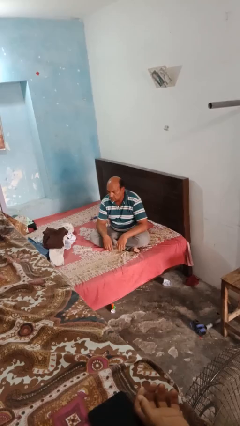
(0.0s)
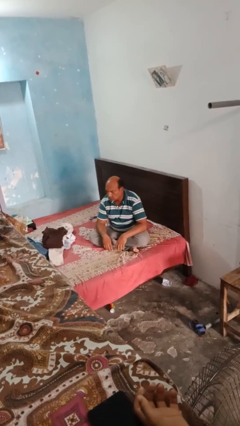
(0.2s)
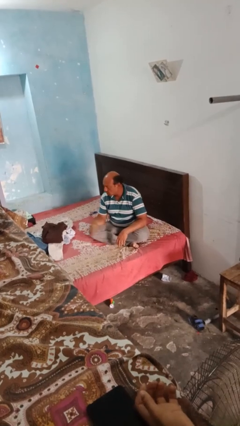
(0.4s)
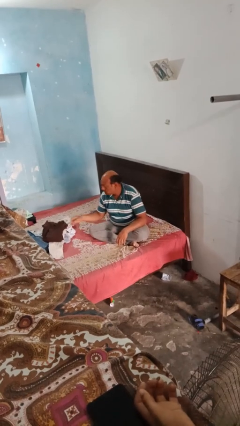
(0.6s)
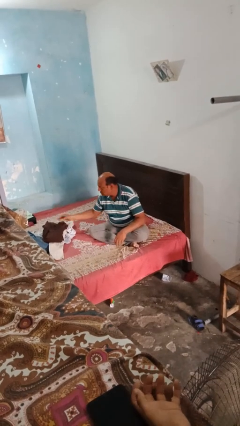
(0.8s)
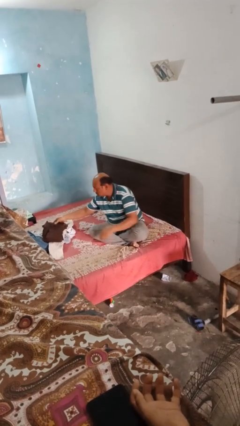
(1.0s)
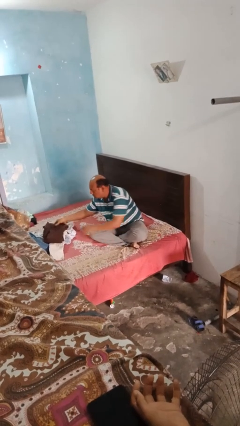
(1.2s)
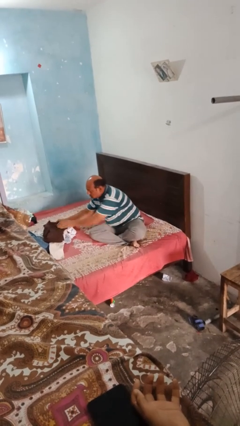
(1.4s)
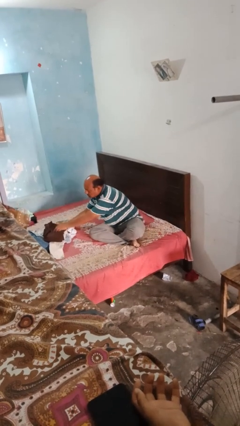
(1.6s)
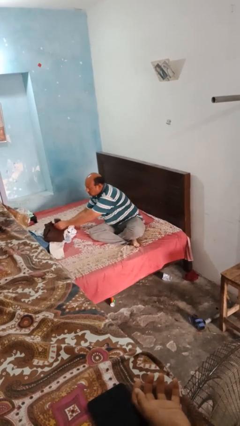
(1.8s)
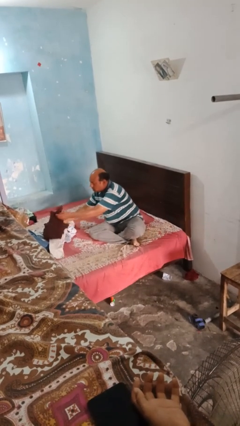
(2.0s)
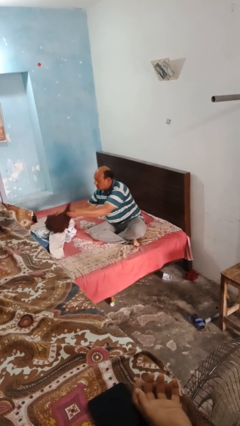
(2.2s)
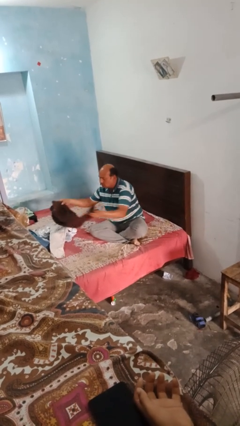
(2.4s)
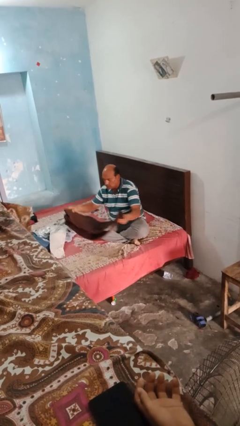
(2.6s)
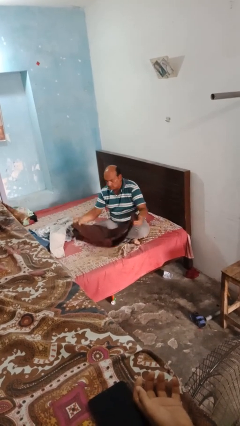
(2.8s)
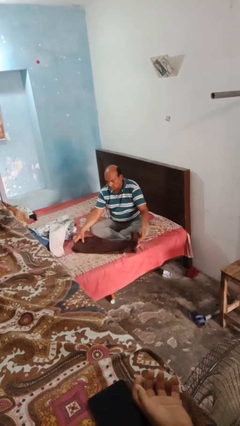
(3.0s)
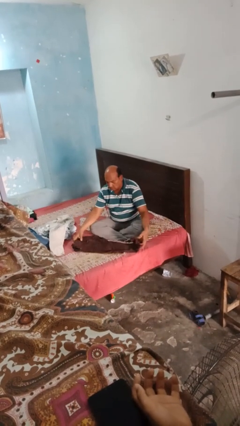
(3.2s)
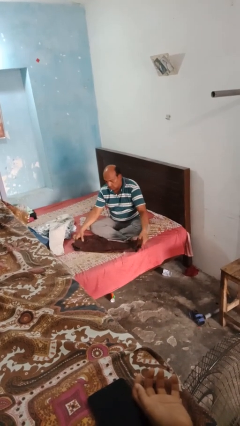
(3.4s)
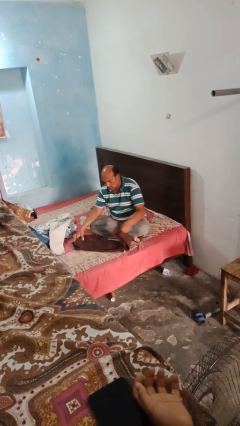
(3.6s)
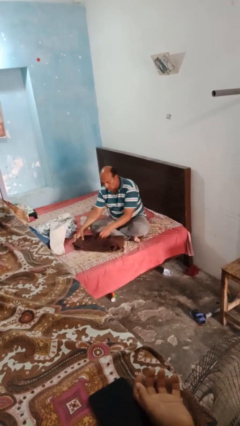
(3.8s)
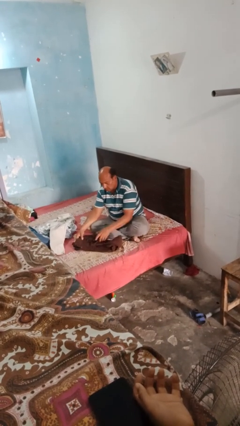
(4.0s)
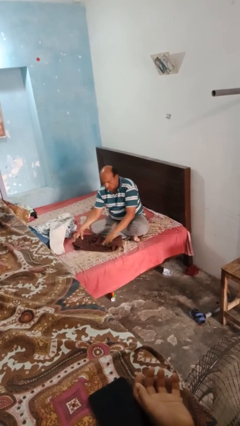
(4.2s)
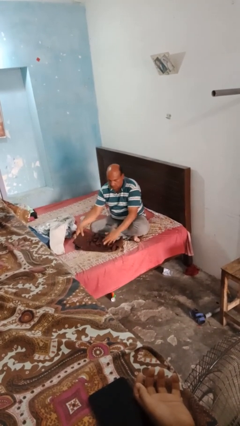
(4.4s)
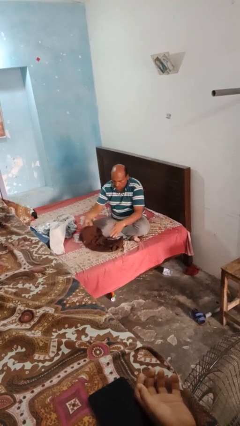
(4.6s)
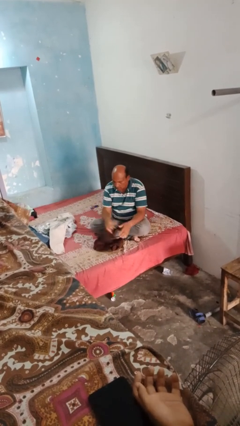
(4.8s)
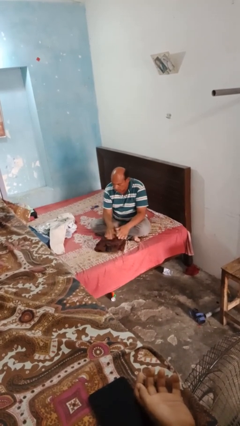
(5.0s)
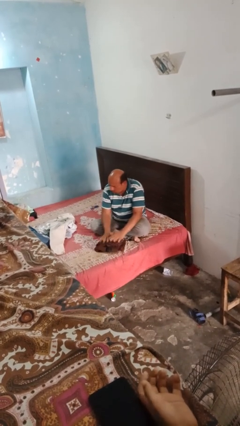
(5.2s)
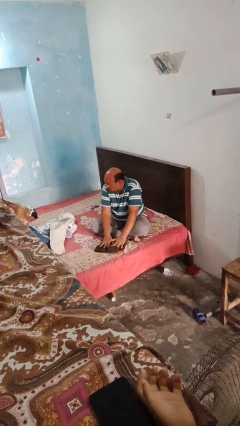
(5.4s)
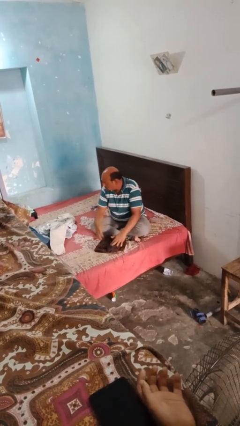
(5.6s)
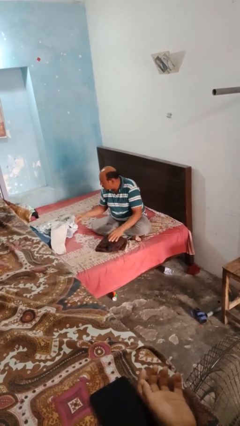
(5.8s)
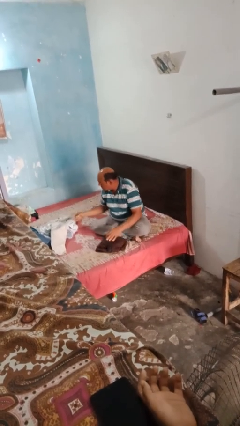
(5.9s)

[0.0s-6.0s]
person folds pants

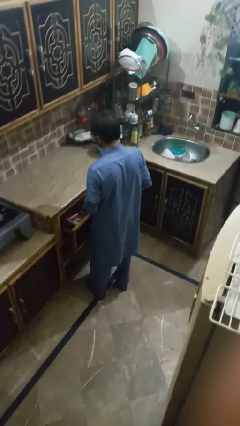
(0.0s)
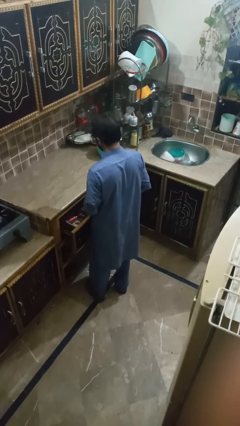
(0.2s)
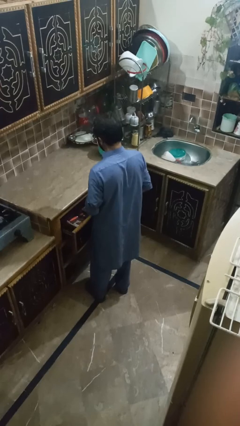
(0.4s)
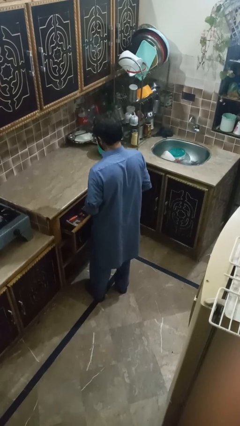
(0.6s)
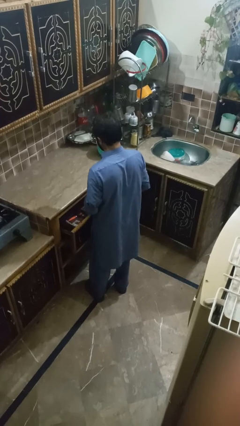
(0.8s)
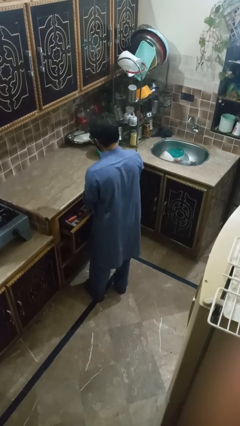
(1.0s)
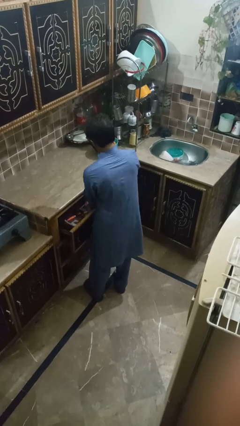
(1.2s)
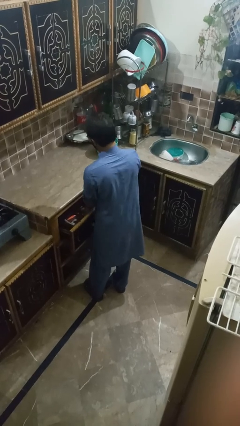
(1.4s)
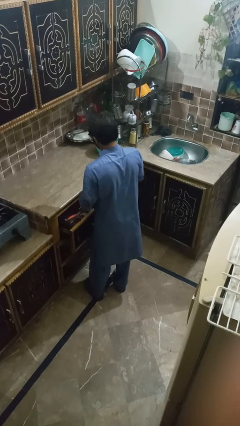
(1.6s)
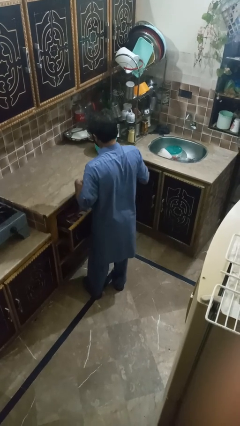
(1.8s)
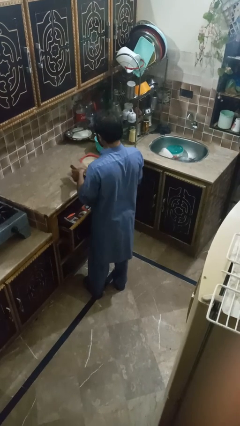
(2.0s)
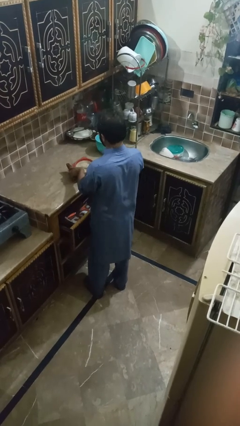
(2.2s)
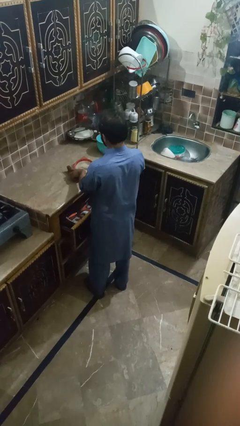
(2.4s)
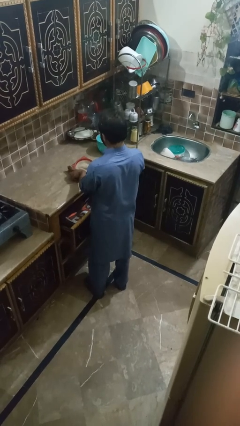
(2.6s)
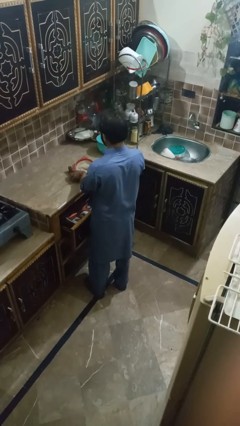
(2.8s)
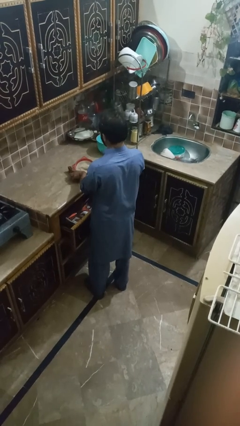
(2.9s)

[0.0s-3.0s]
person takes object from kitchen drawer

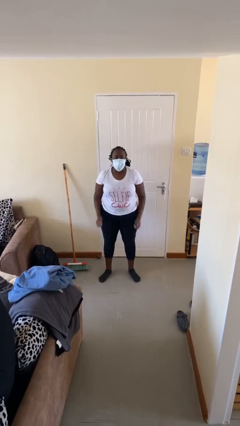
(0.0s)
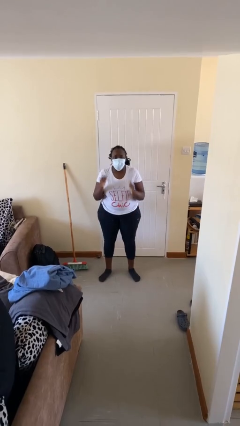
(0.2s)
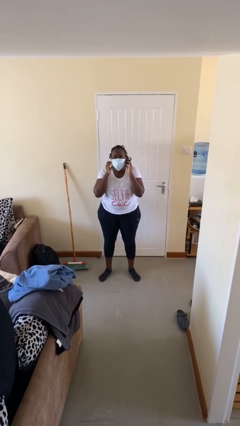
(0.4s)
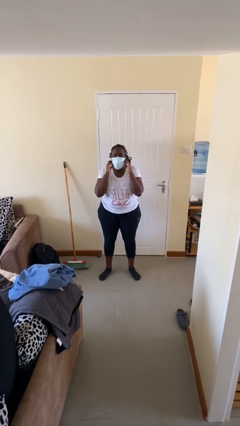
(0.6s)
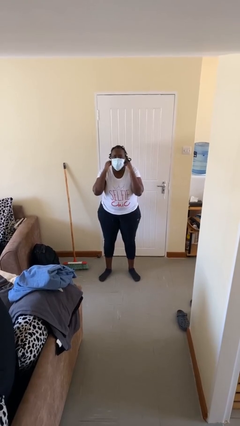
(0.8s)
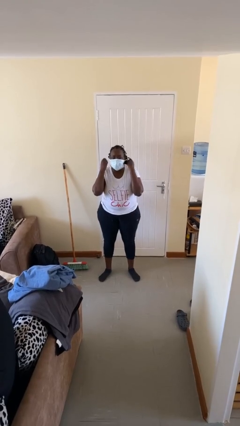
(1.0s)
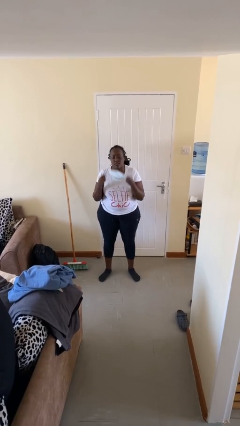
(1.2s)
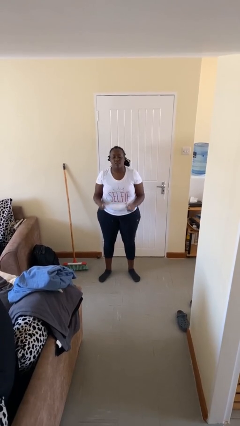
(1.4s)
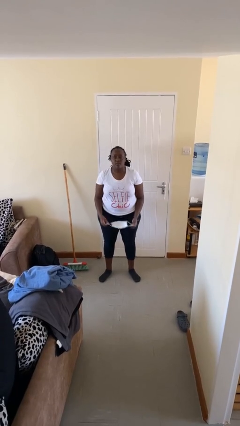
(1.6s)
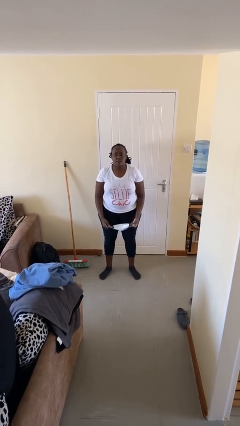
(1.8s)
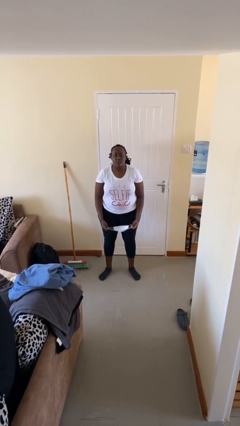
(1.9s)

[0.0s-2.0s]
person takes off facemask

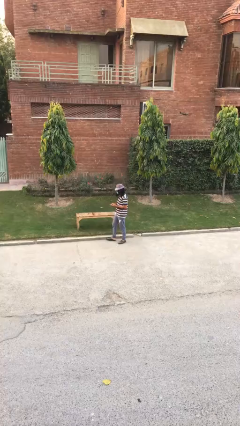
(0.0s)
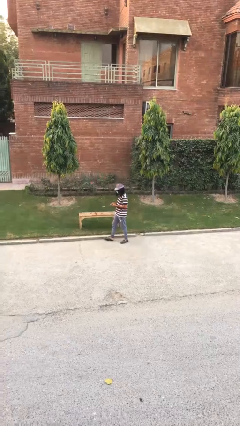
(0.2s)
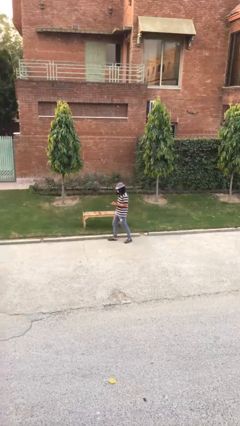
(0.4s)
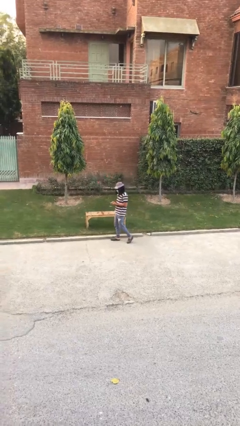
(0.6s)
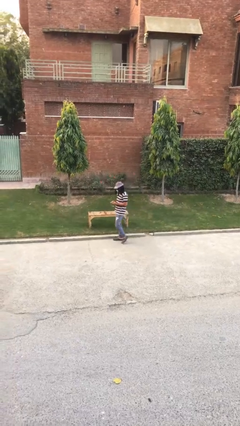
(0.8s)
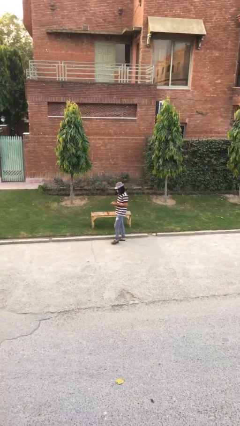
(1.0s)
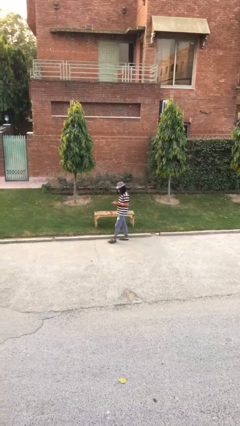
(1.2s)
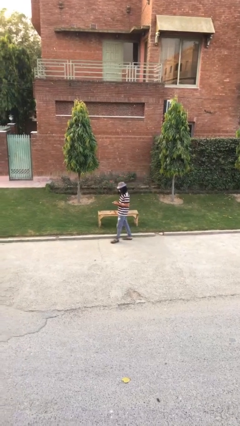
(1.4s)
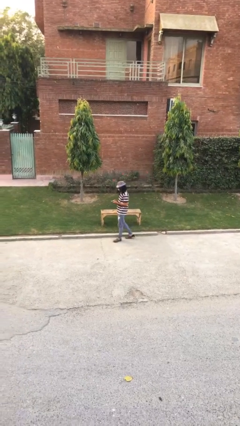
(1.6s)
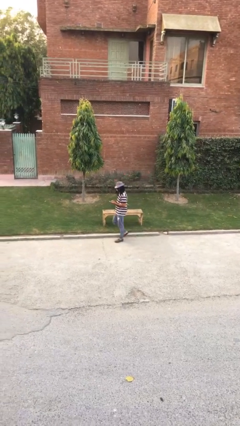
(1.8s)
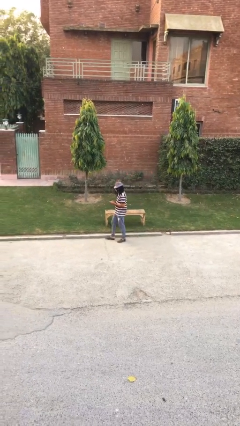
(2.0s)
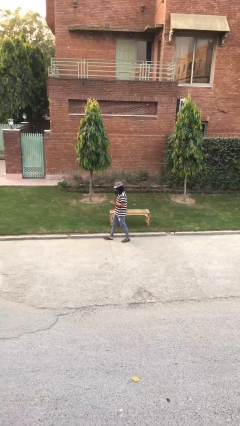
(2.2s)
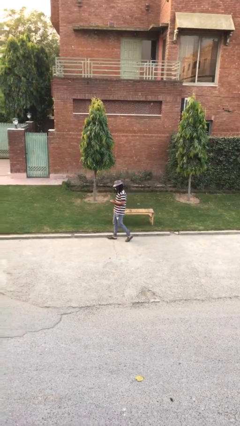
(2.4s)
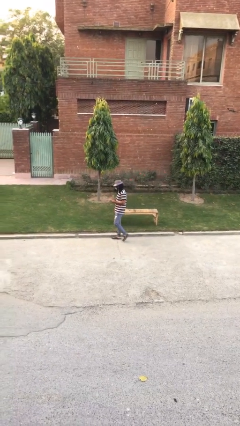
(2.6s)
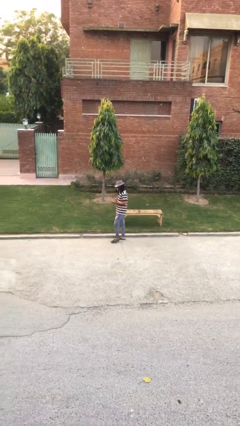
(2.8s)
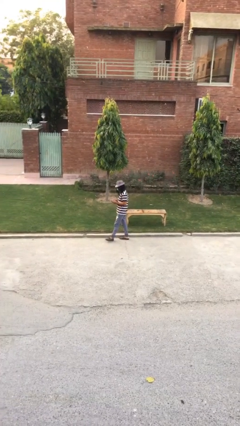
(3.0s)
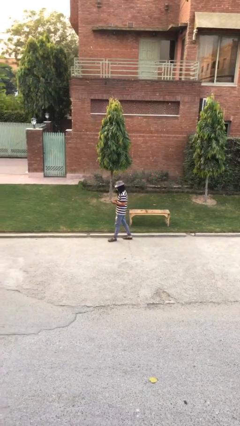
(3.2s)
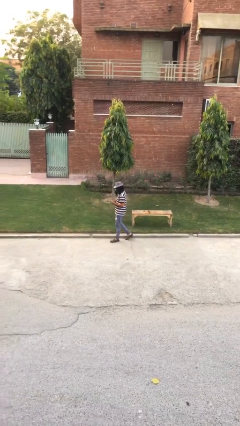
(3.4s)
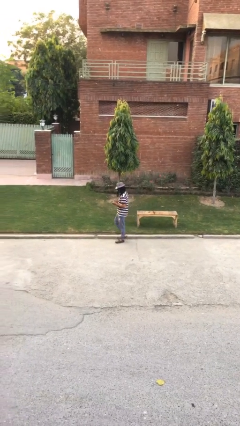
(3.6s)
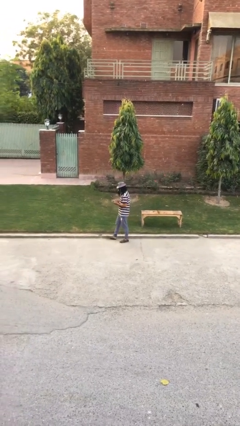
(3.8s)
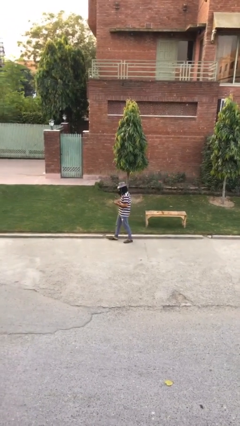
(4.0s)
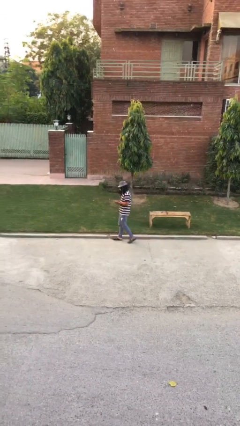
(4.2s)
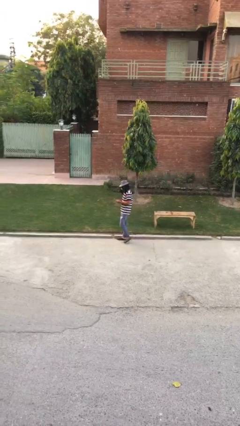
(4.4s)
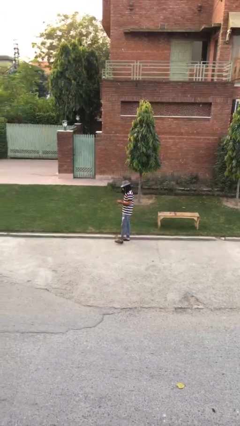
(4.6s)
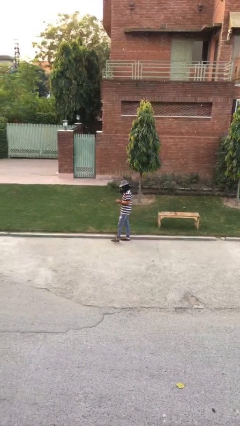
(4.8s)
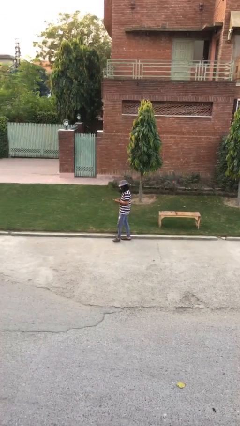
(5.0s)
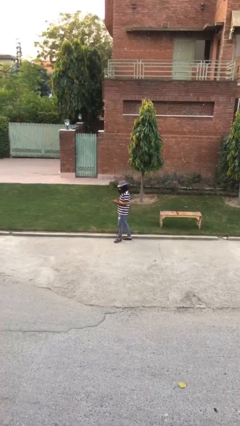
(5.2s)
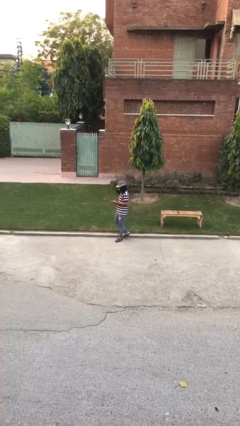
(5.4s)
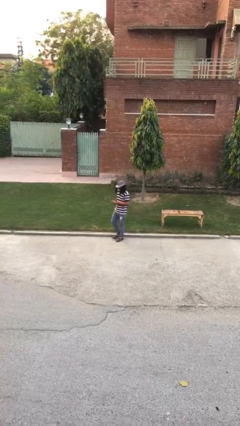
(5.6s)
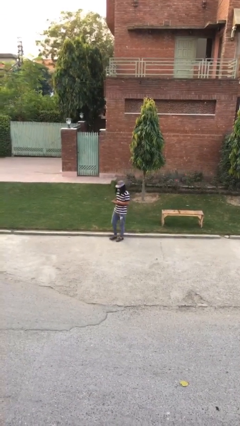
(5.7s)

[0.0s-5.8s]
person texts on phone

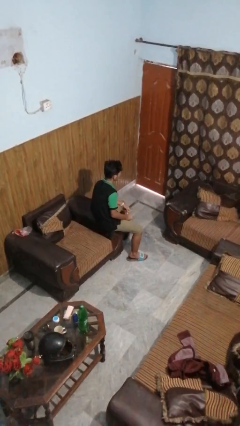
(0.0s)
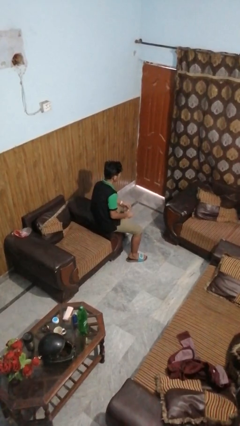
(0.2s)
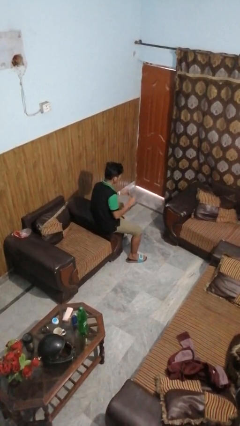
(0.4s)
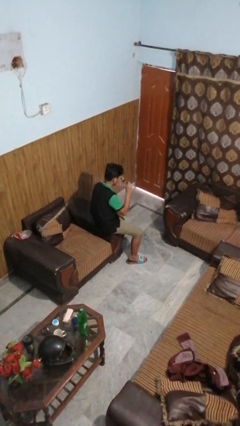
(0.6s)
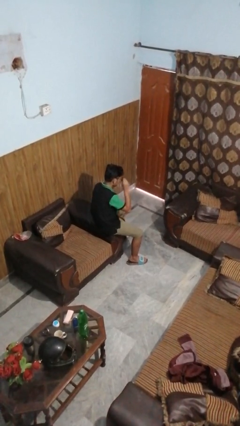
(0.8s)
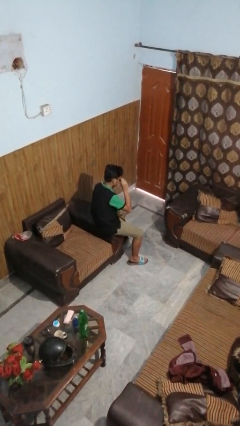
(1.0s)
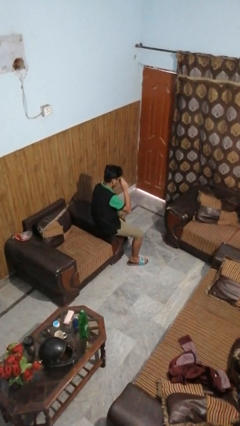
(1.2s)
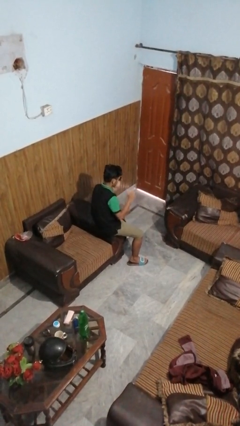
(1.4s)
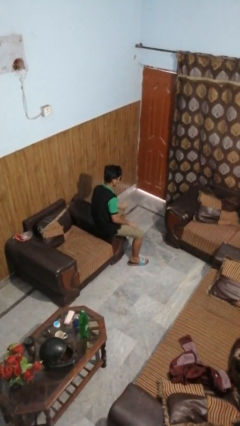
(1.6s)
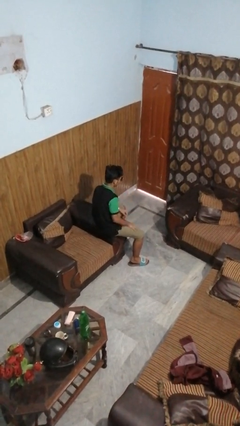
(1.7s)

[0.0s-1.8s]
person puts on sunglasses
